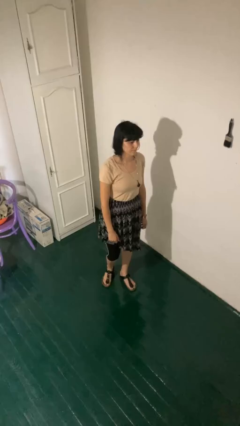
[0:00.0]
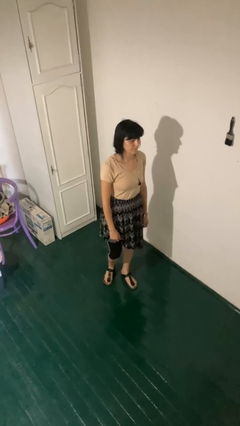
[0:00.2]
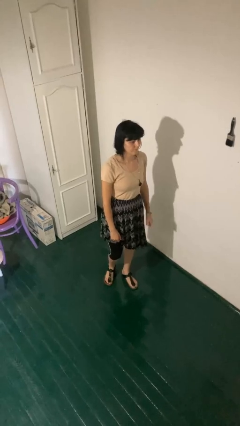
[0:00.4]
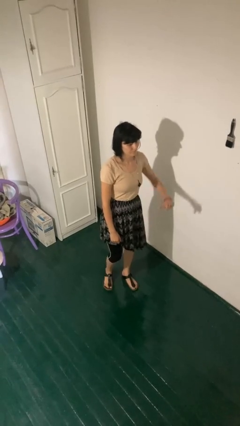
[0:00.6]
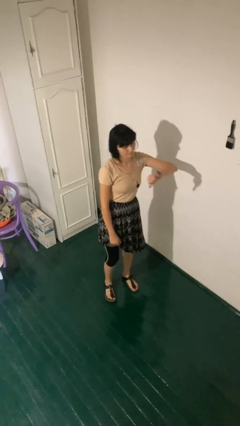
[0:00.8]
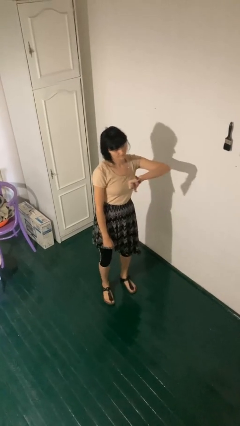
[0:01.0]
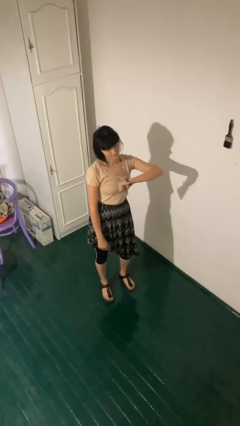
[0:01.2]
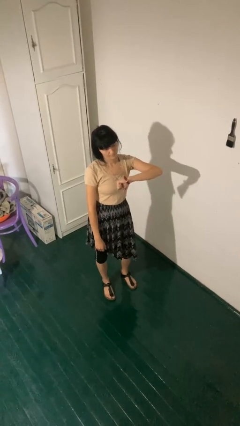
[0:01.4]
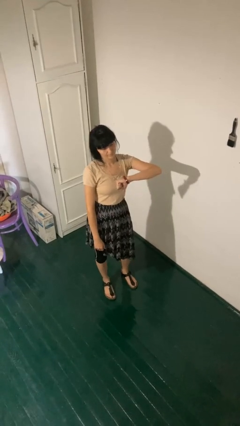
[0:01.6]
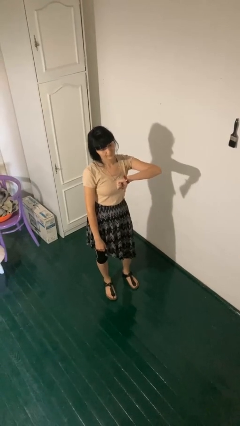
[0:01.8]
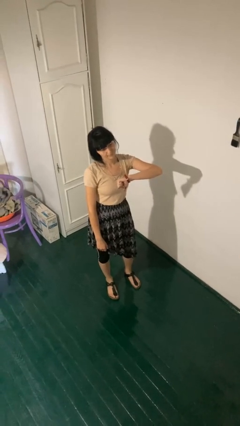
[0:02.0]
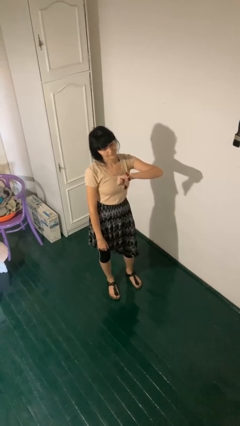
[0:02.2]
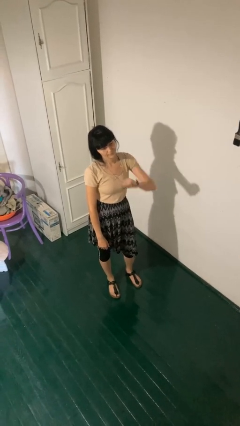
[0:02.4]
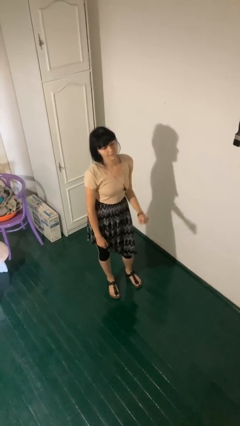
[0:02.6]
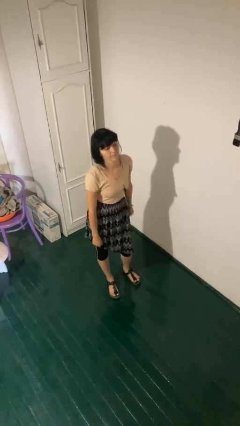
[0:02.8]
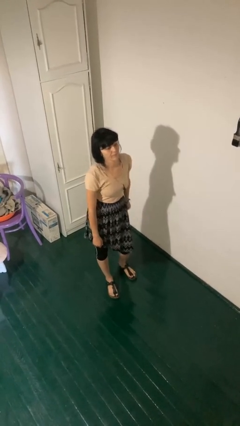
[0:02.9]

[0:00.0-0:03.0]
person gestures thumbs down

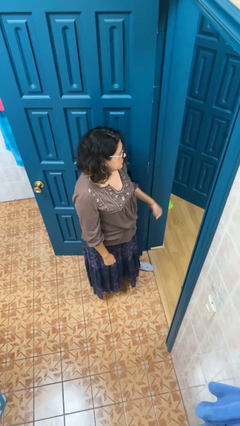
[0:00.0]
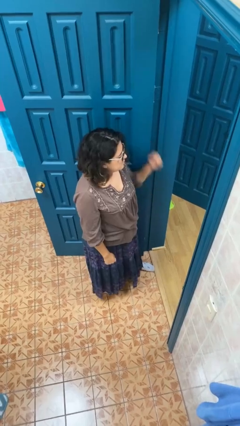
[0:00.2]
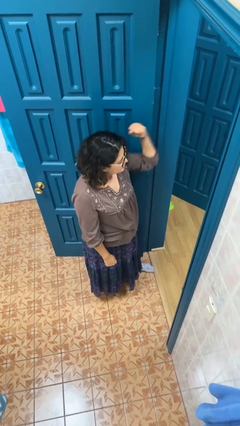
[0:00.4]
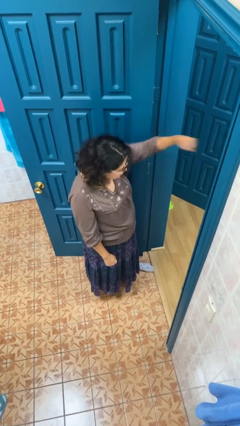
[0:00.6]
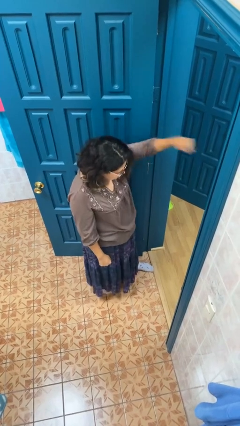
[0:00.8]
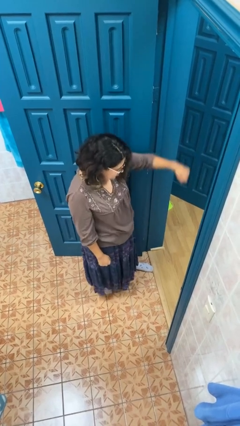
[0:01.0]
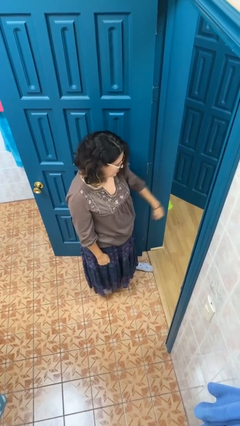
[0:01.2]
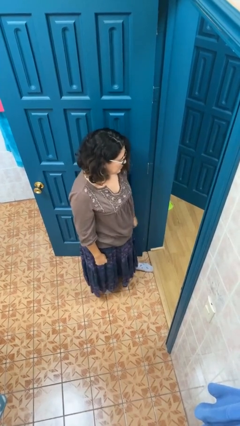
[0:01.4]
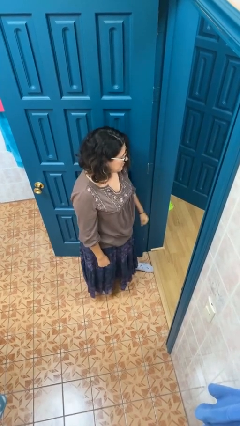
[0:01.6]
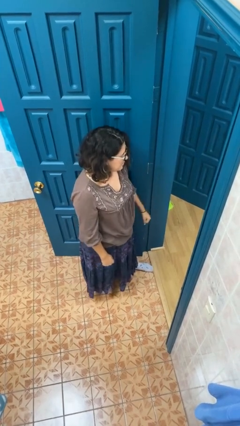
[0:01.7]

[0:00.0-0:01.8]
person punches

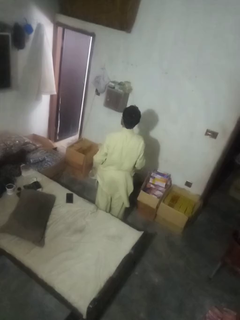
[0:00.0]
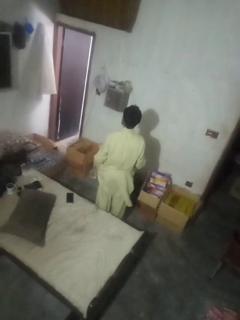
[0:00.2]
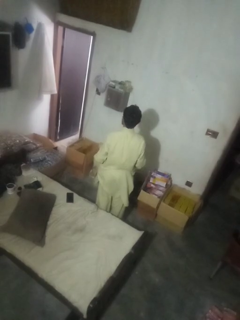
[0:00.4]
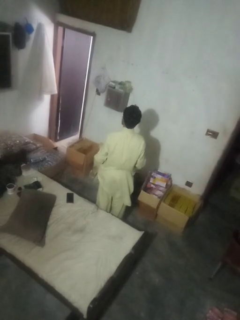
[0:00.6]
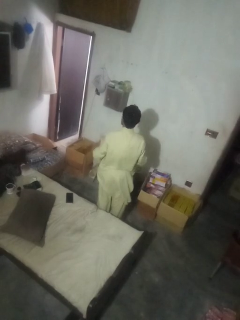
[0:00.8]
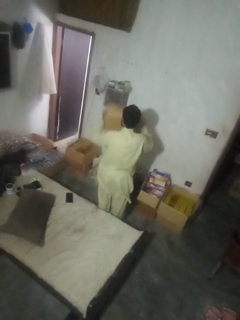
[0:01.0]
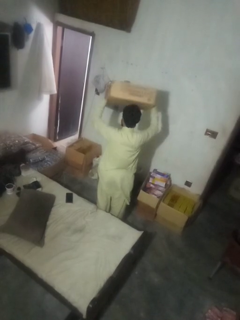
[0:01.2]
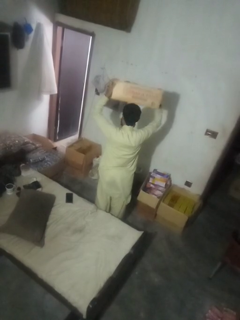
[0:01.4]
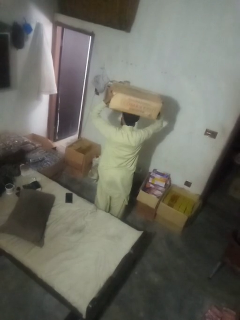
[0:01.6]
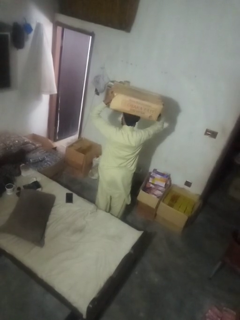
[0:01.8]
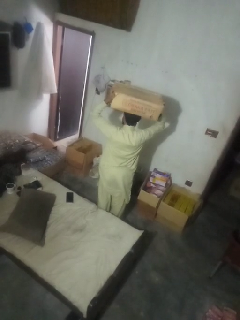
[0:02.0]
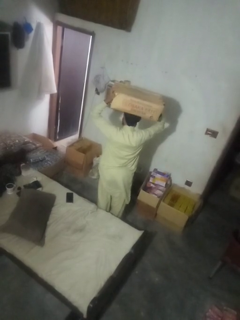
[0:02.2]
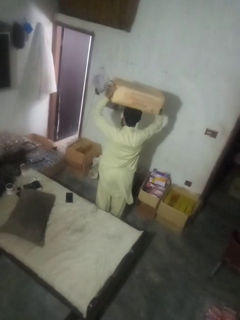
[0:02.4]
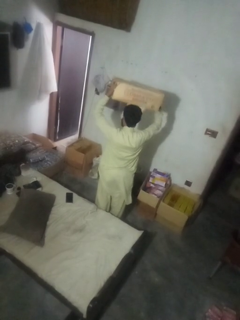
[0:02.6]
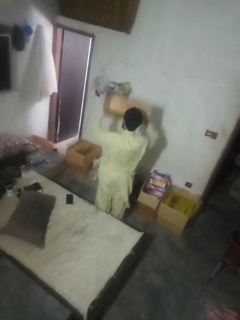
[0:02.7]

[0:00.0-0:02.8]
person holds object above head

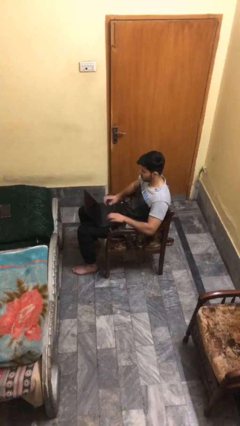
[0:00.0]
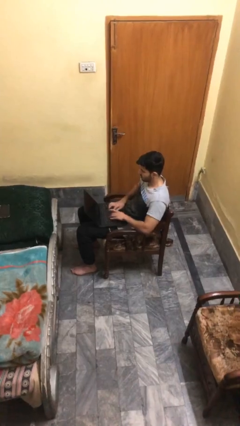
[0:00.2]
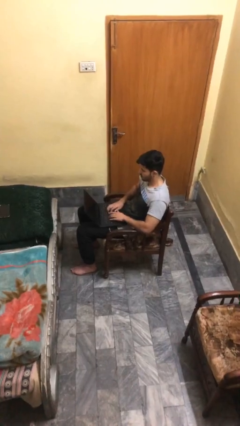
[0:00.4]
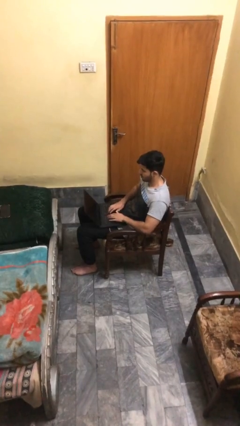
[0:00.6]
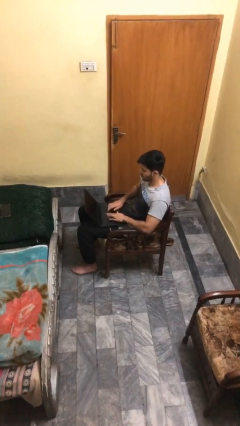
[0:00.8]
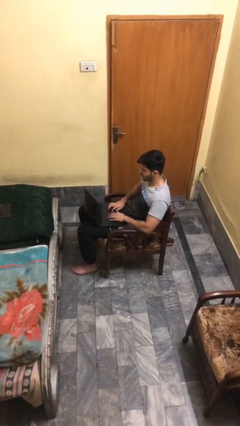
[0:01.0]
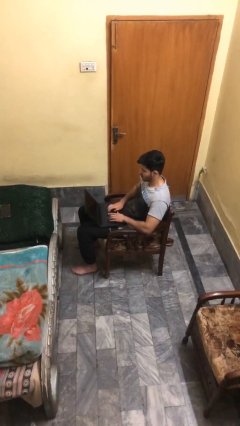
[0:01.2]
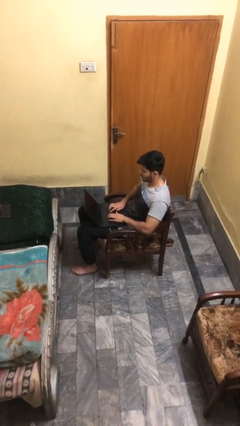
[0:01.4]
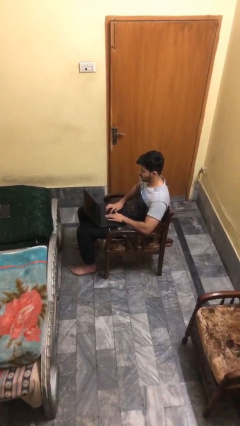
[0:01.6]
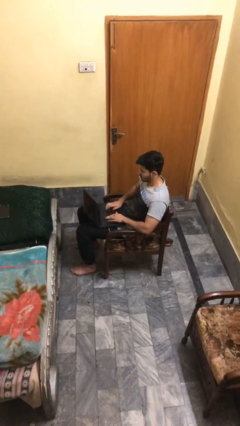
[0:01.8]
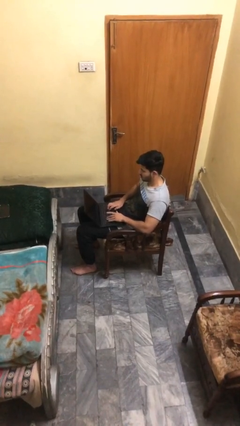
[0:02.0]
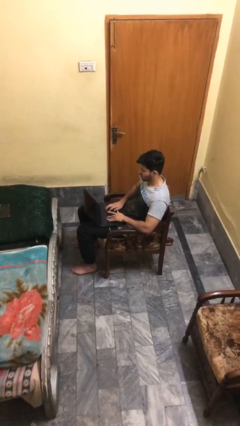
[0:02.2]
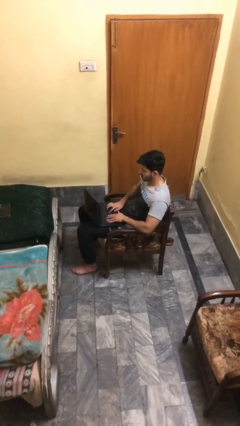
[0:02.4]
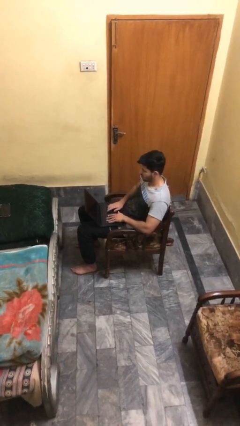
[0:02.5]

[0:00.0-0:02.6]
person interacts with laptop

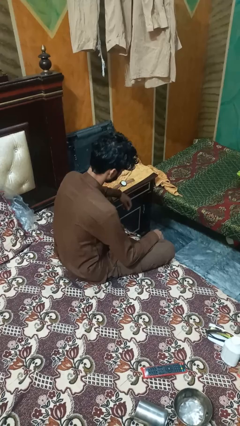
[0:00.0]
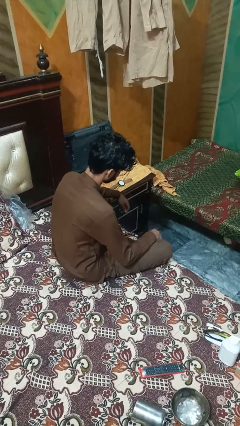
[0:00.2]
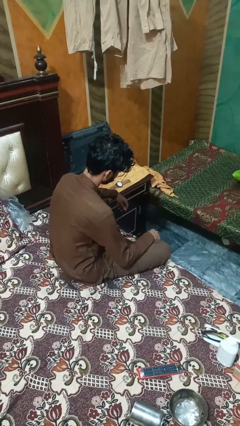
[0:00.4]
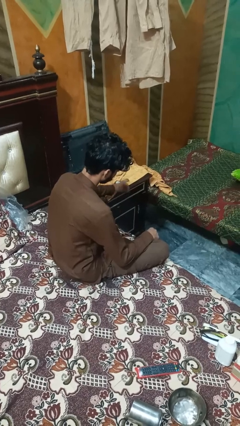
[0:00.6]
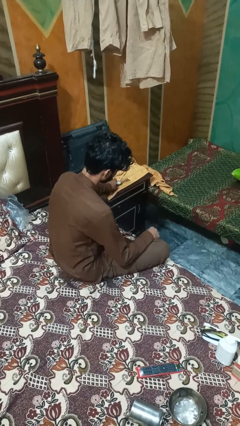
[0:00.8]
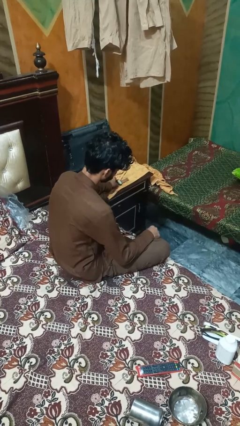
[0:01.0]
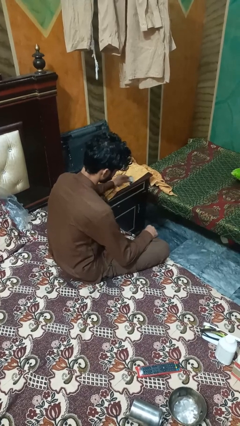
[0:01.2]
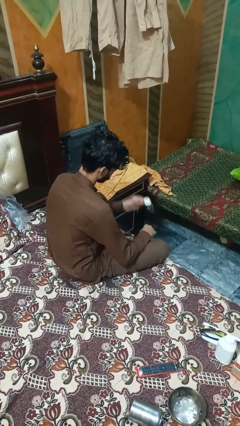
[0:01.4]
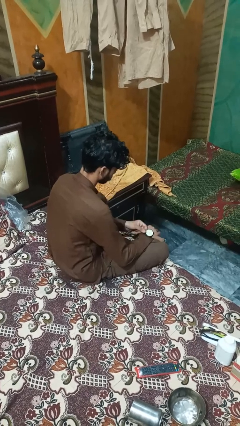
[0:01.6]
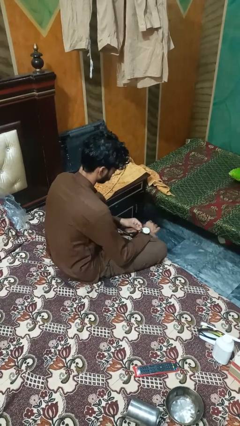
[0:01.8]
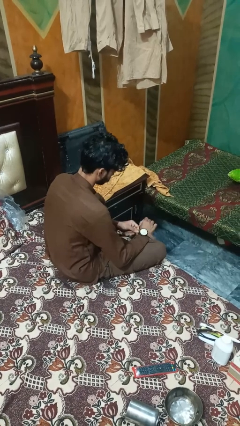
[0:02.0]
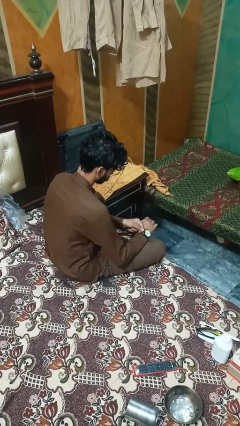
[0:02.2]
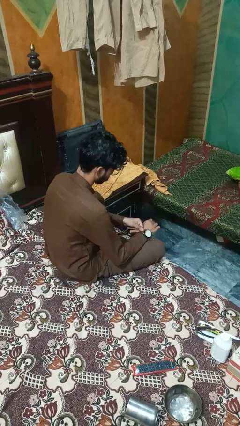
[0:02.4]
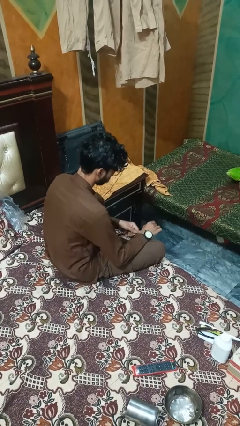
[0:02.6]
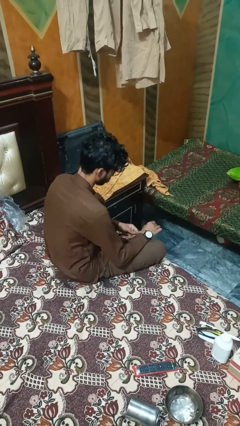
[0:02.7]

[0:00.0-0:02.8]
person puts on wristwatch

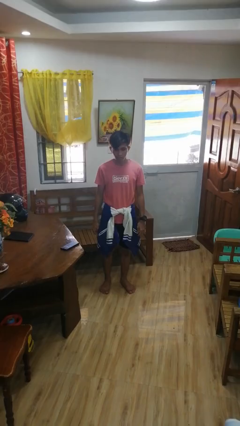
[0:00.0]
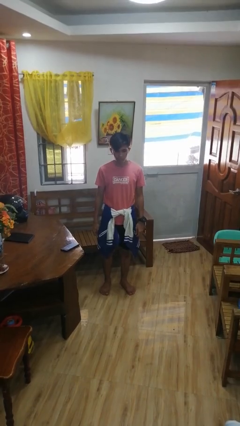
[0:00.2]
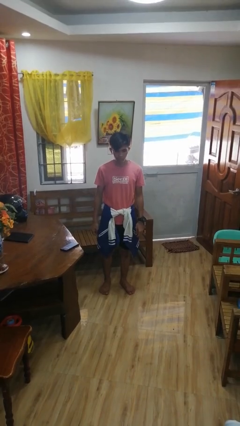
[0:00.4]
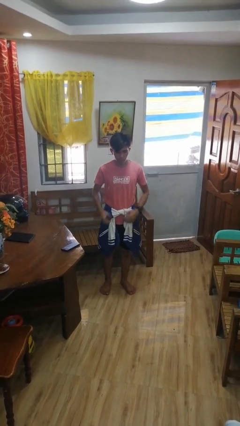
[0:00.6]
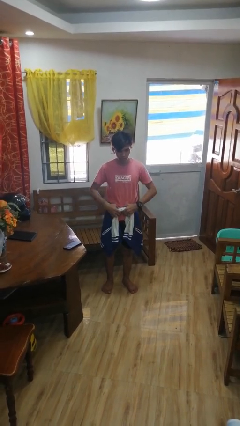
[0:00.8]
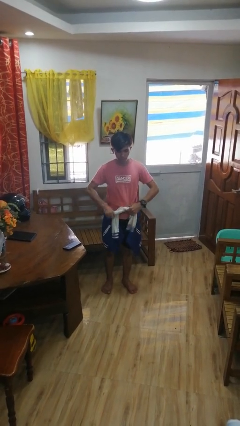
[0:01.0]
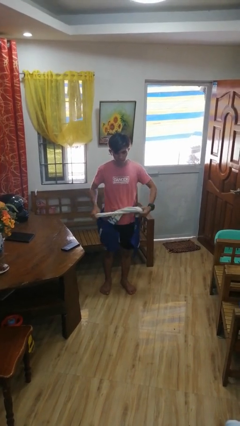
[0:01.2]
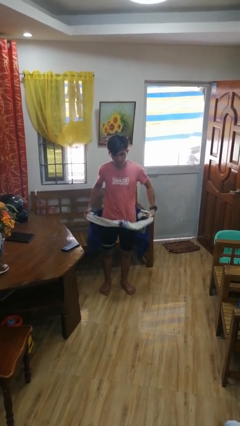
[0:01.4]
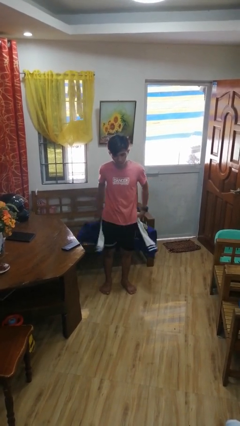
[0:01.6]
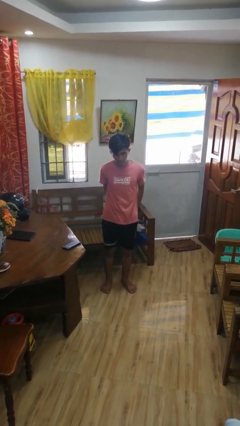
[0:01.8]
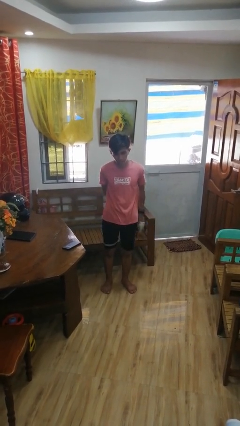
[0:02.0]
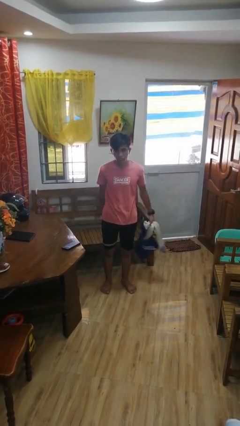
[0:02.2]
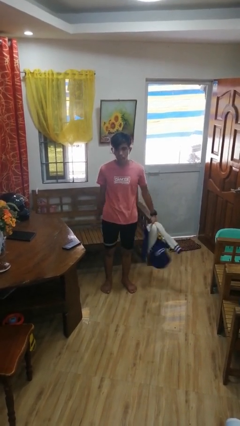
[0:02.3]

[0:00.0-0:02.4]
person unties jacket around waist

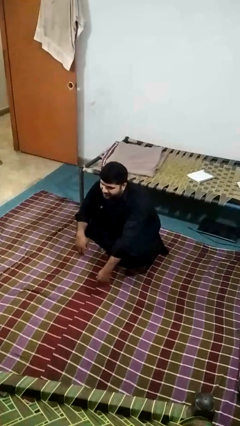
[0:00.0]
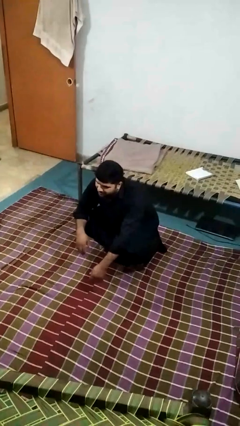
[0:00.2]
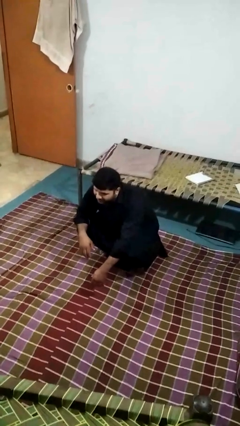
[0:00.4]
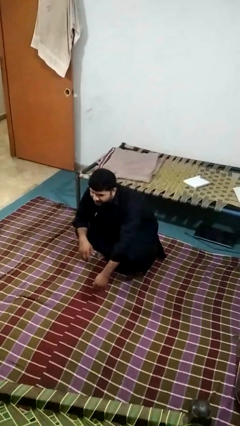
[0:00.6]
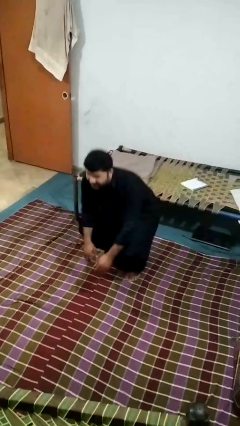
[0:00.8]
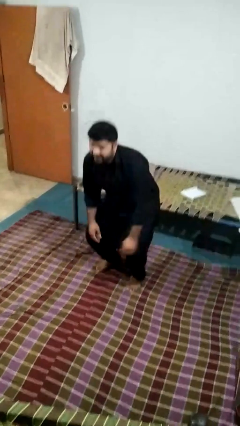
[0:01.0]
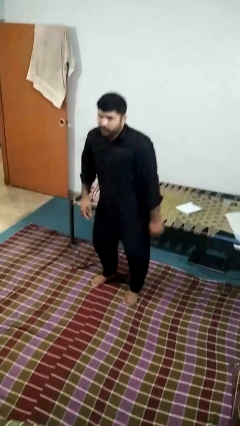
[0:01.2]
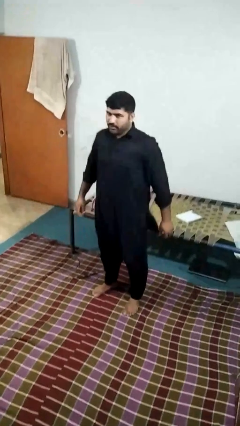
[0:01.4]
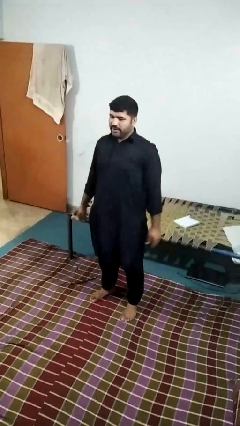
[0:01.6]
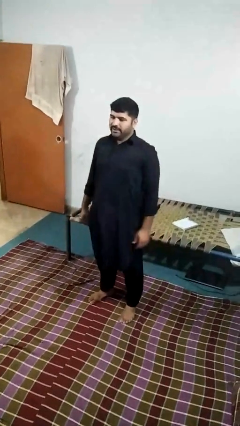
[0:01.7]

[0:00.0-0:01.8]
person stands up
